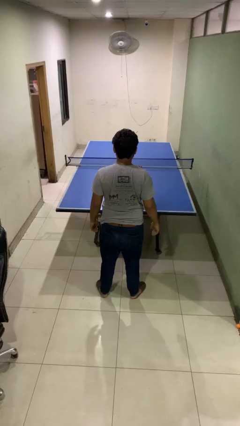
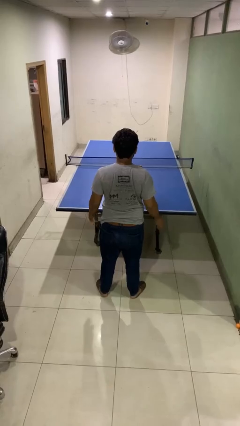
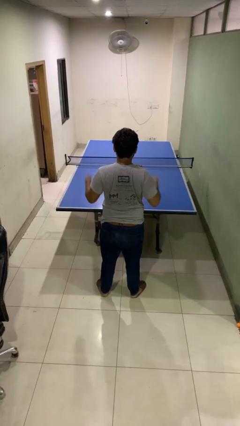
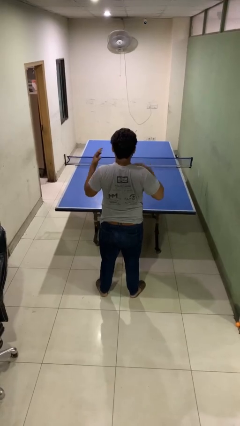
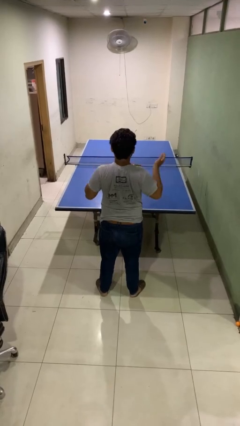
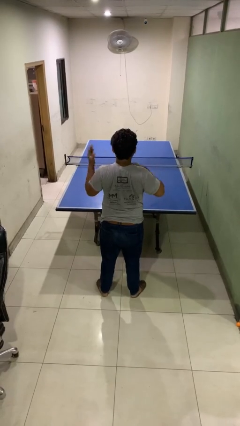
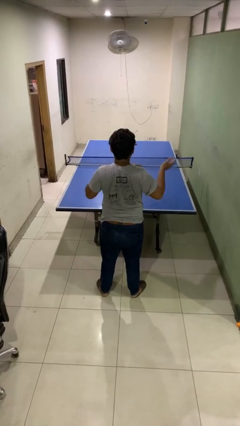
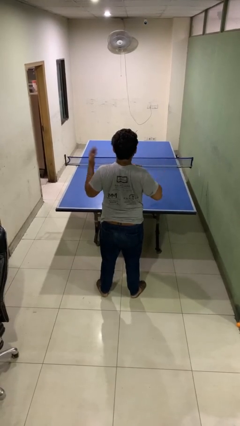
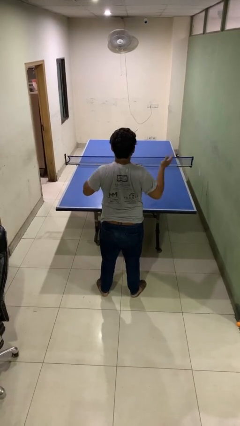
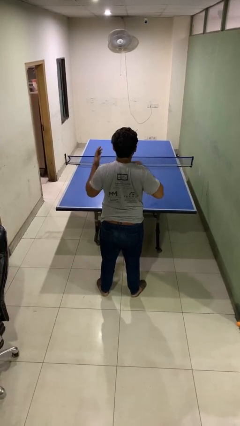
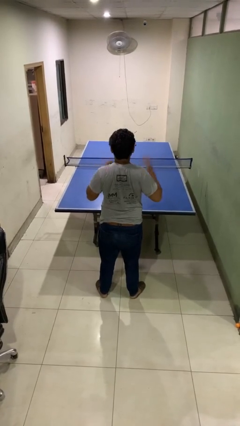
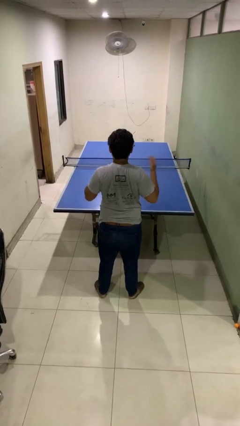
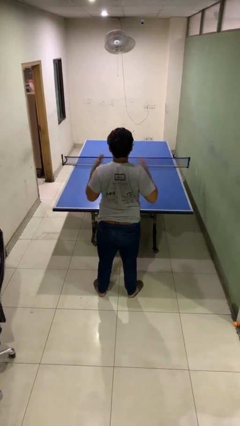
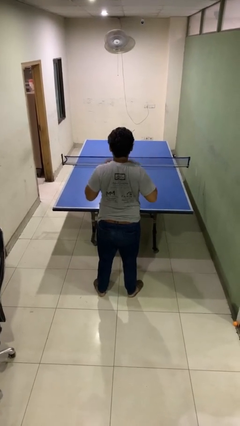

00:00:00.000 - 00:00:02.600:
person drums on chest

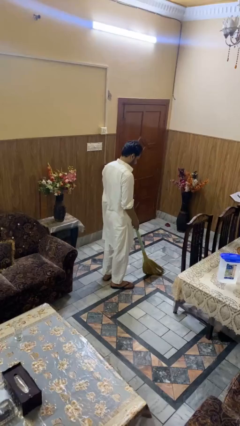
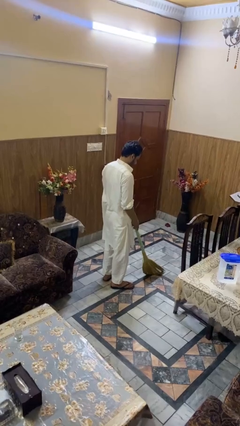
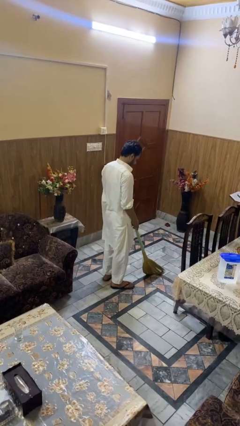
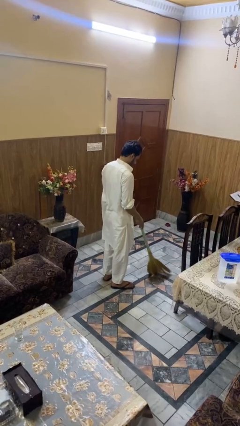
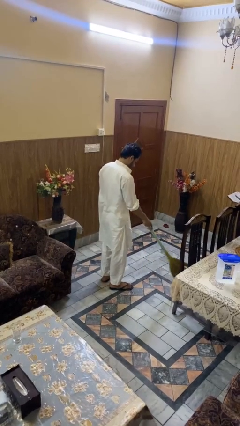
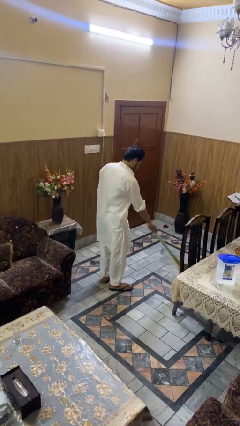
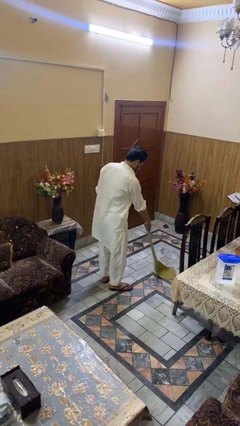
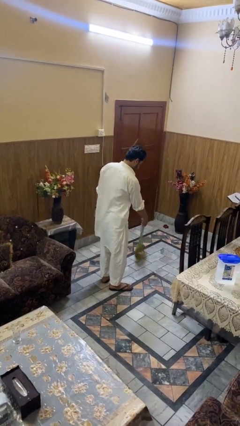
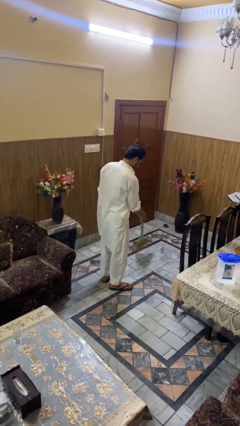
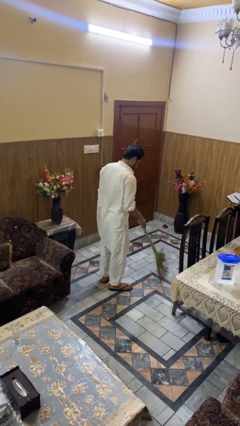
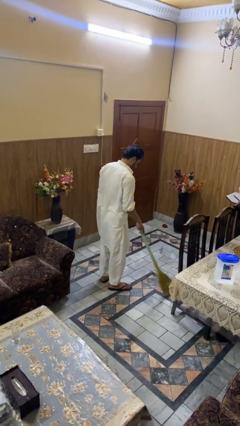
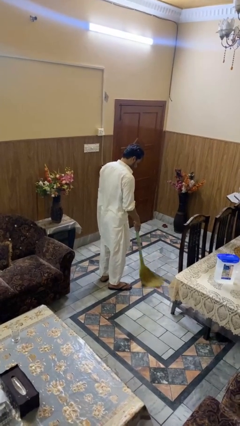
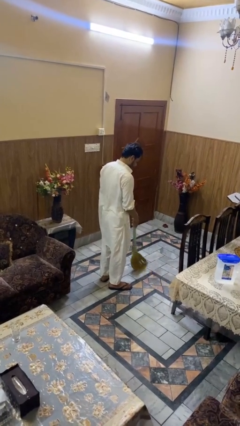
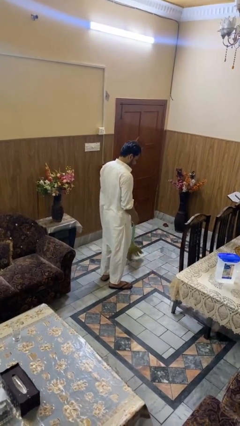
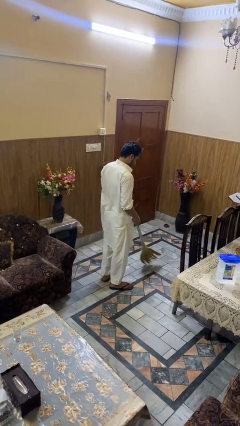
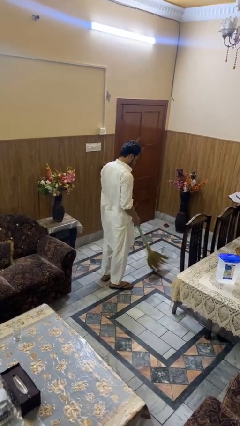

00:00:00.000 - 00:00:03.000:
person sweeps floor

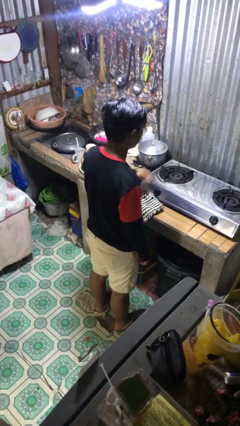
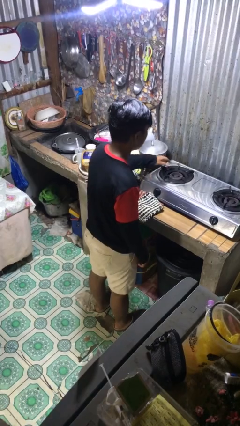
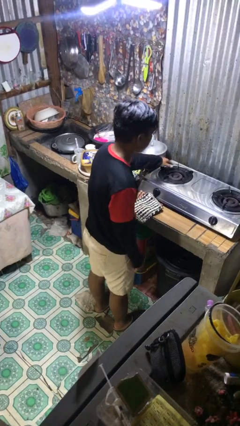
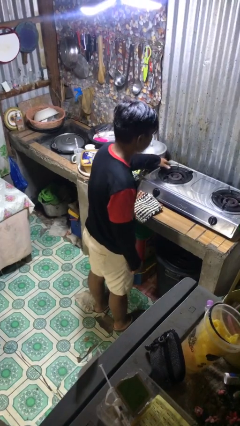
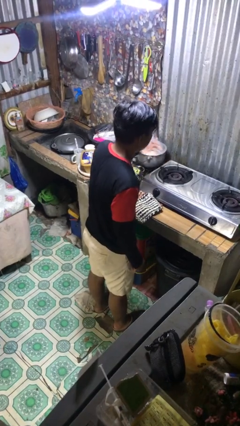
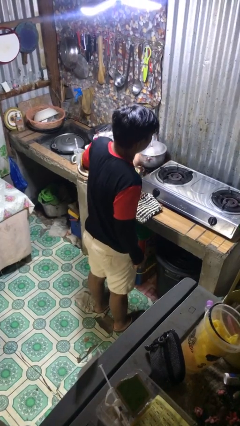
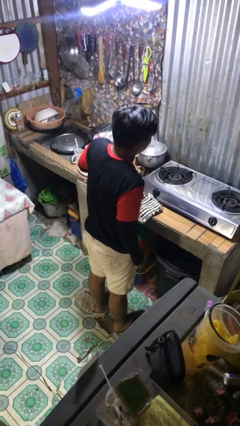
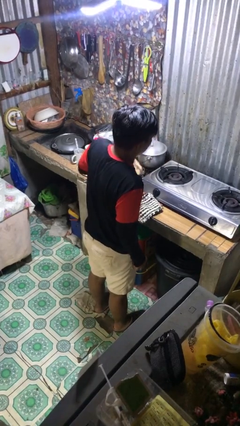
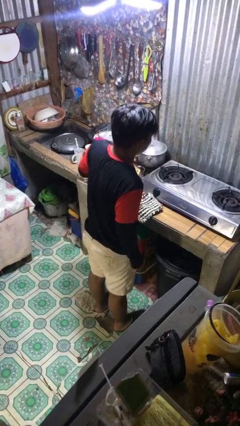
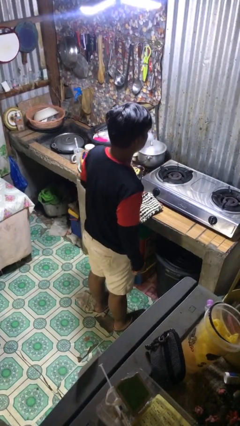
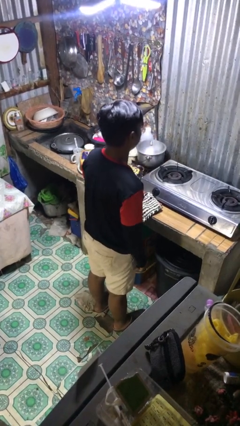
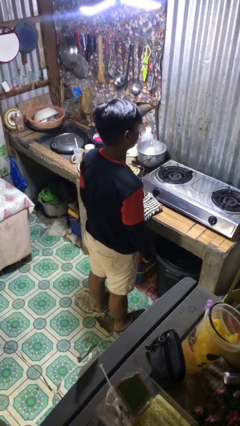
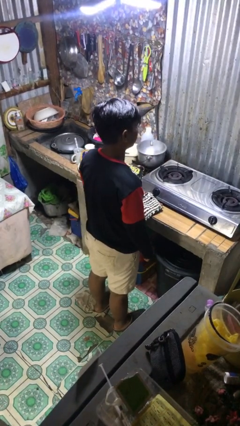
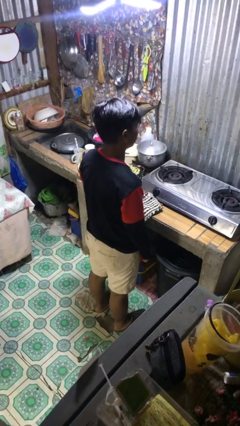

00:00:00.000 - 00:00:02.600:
person burns hand

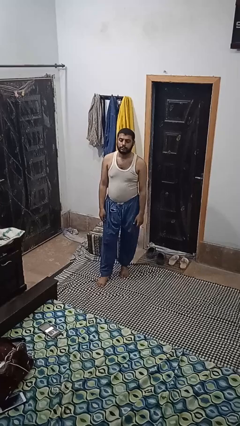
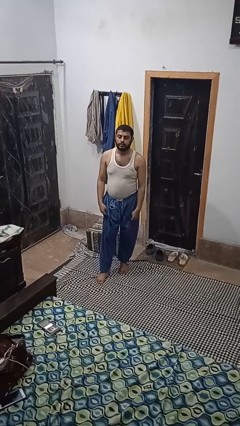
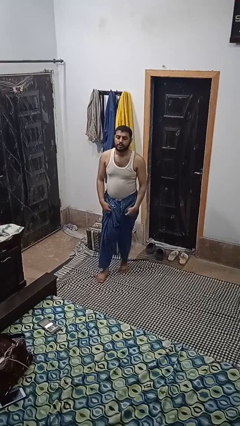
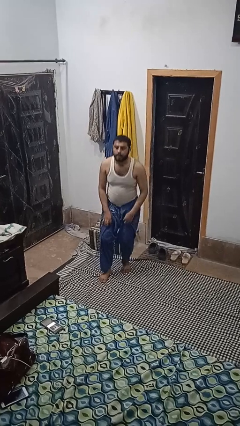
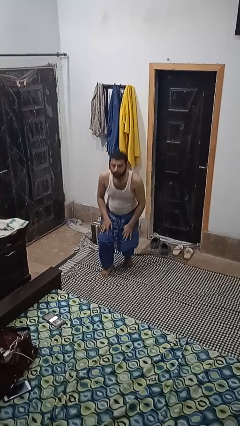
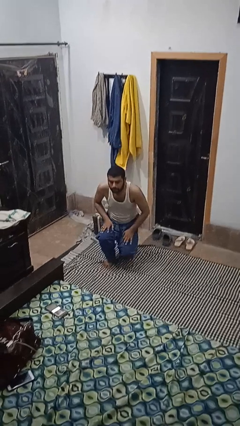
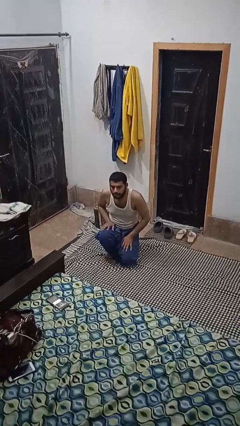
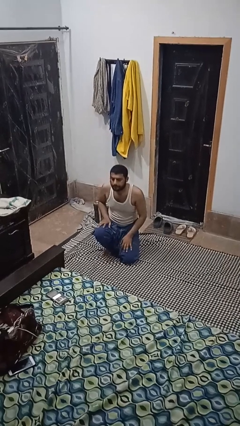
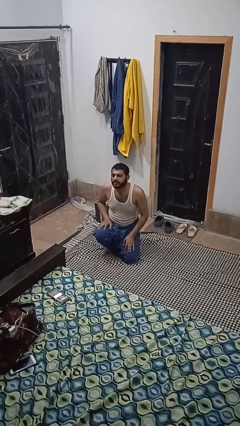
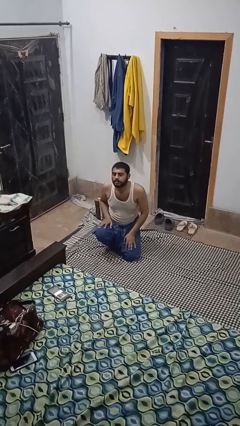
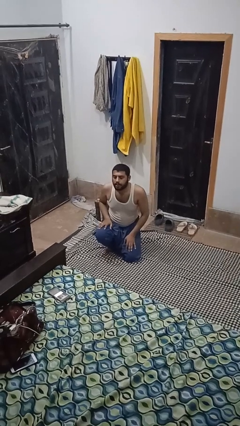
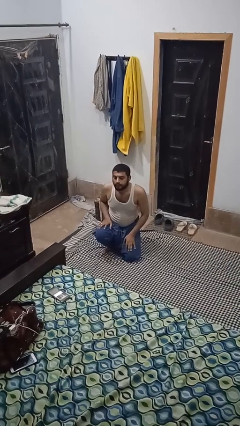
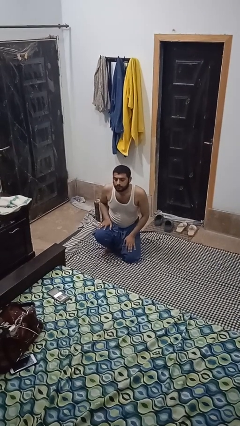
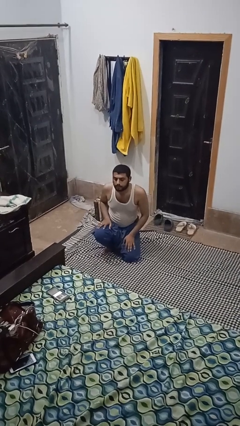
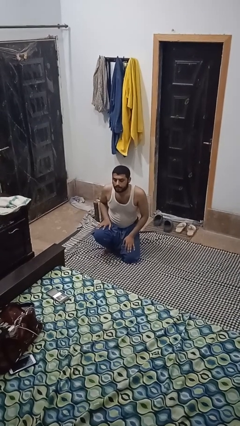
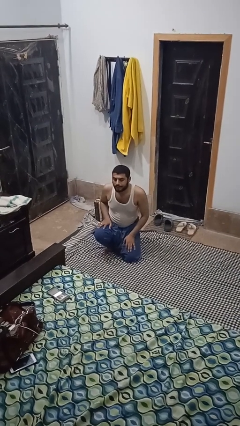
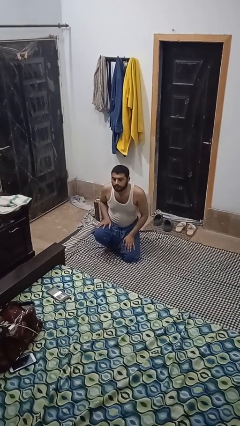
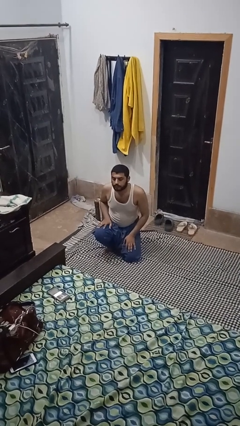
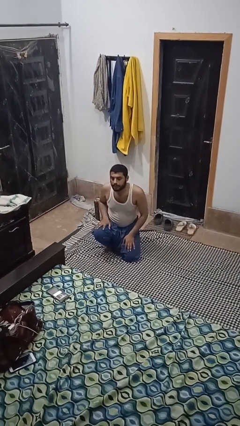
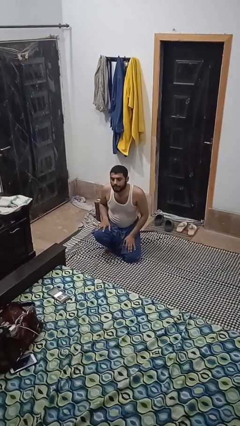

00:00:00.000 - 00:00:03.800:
person kneels

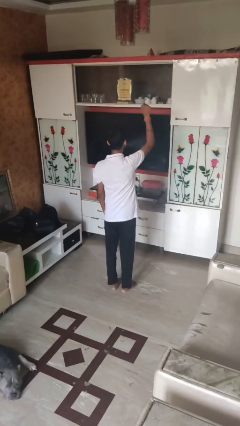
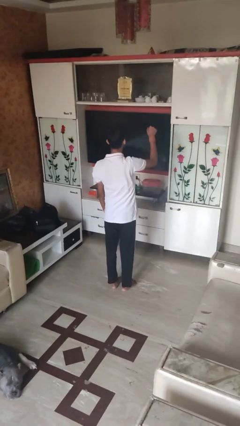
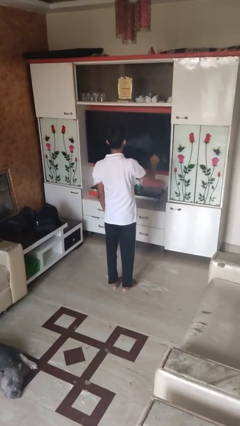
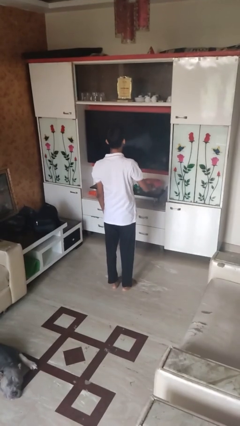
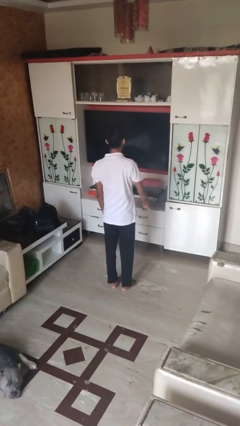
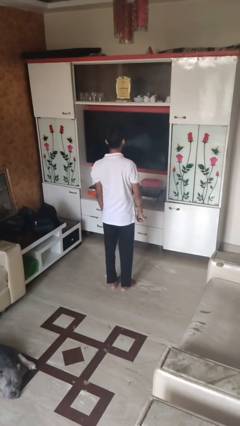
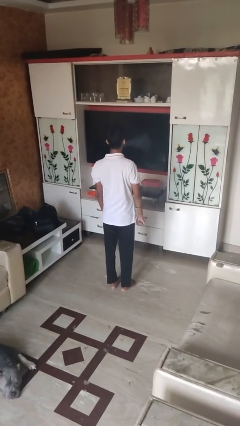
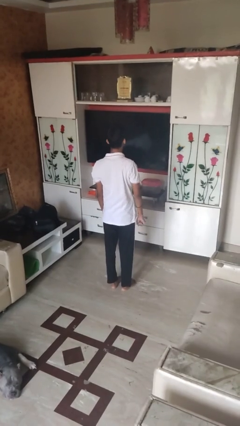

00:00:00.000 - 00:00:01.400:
person gestures lower hand

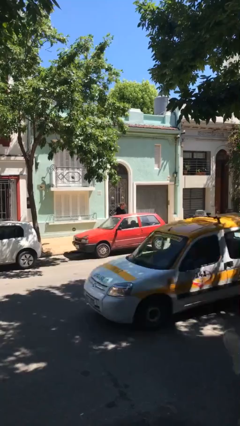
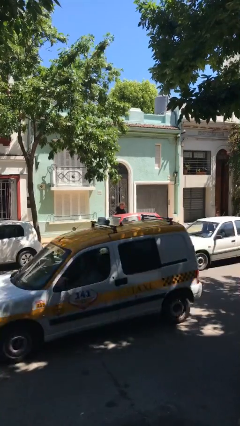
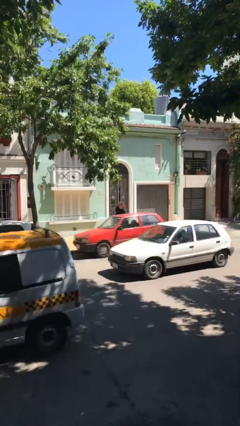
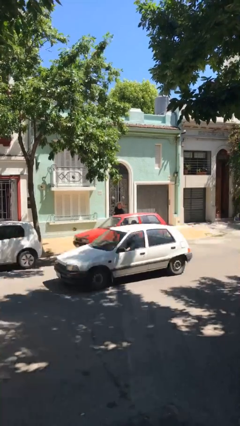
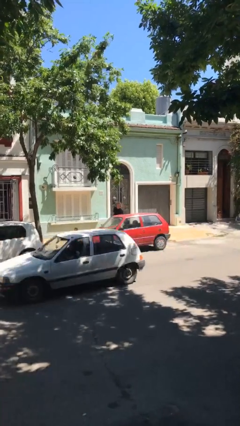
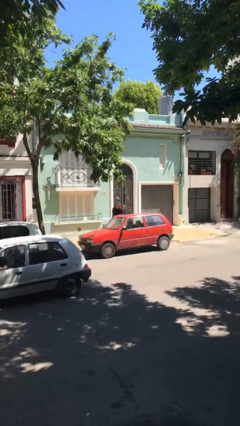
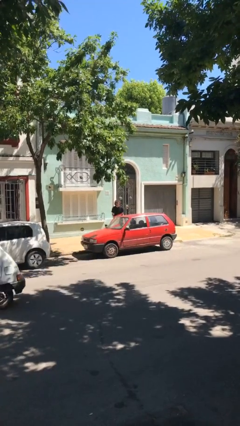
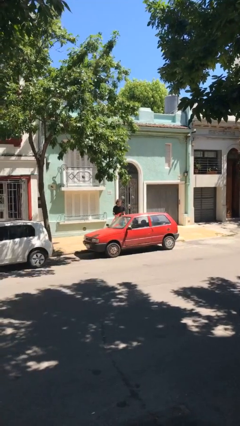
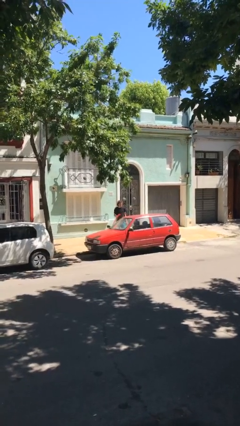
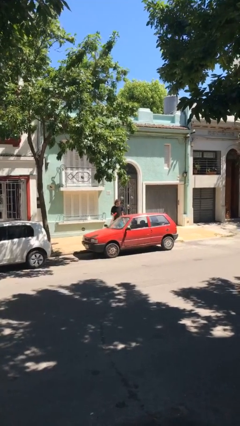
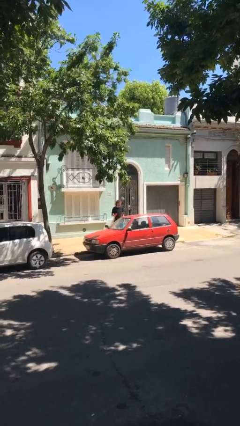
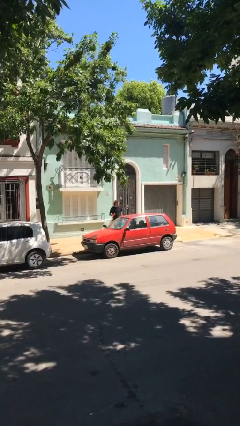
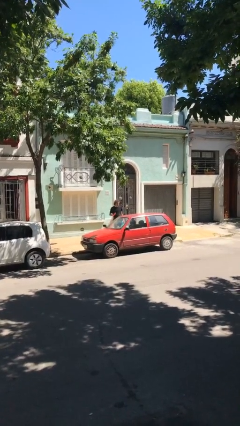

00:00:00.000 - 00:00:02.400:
person opens car door

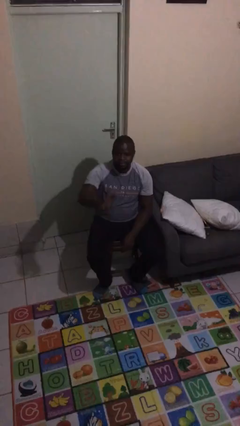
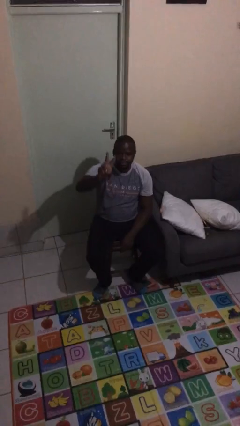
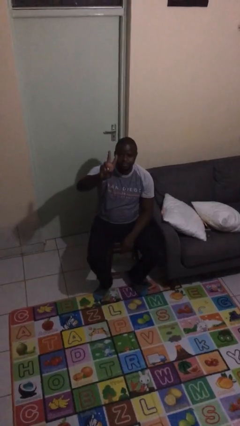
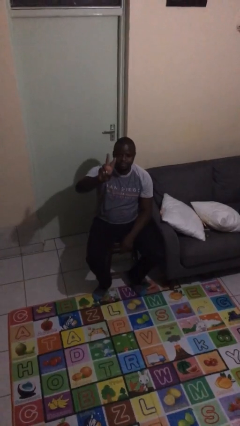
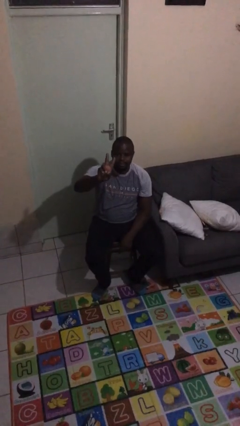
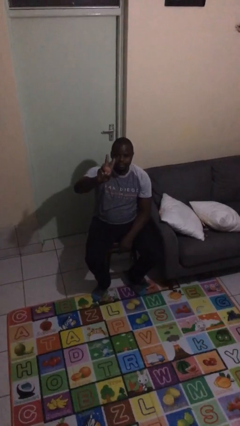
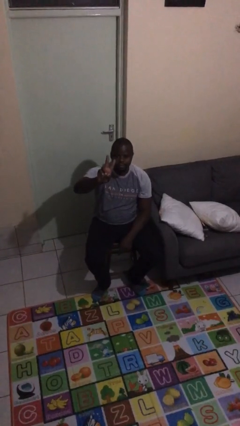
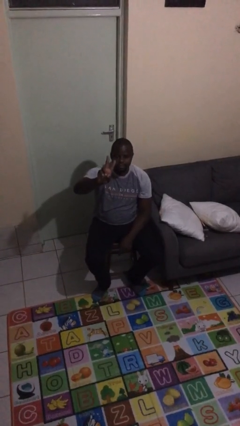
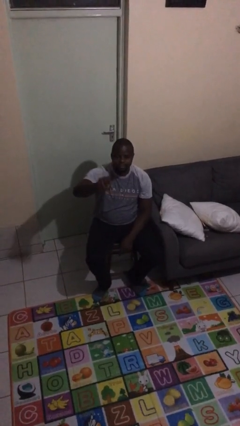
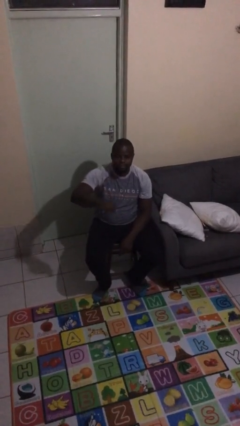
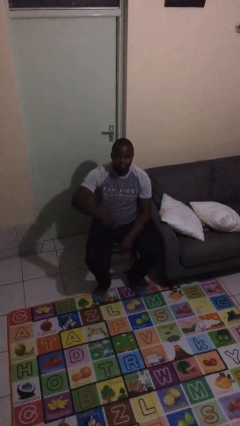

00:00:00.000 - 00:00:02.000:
person gestures peace
